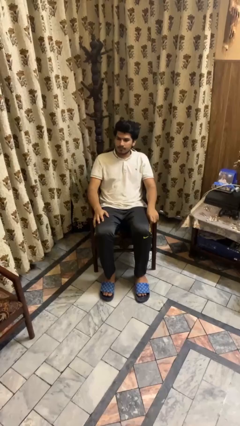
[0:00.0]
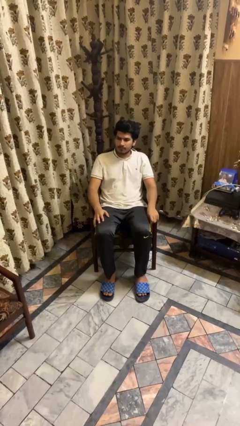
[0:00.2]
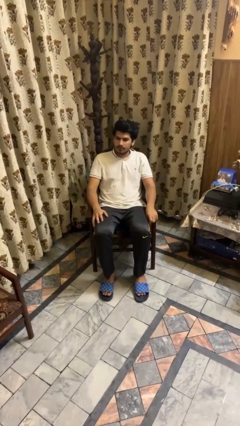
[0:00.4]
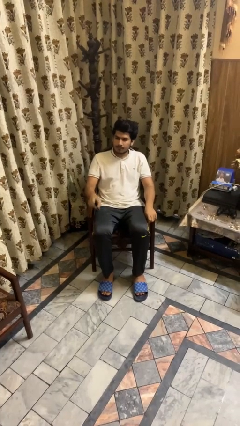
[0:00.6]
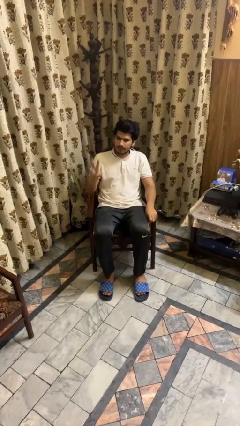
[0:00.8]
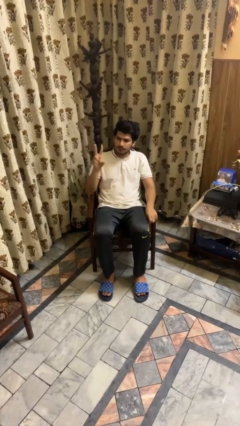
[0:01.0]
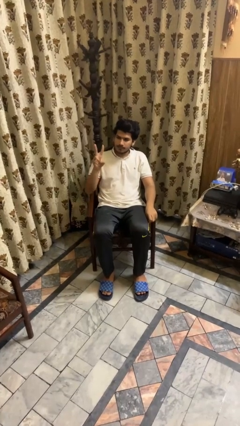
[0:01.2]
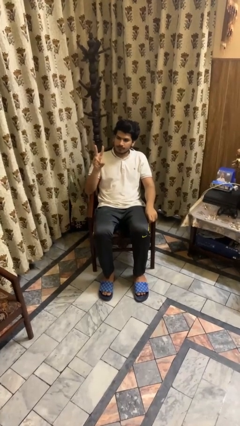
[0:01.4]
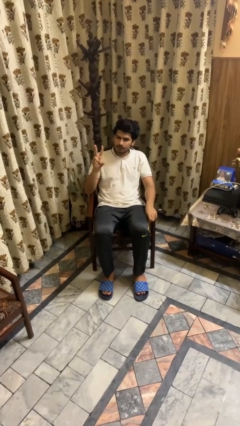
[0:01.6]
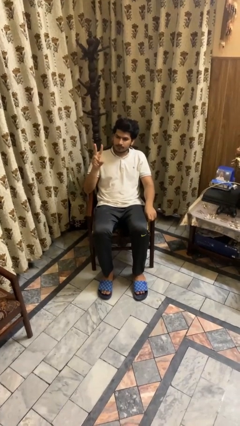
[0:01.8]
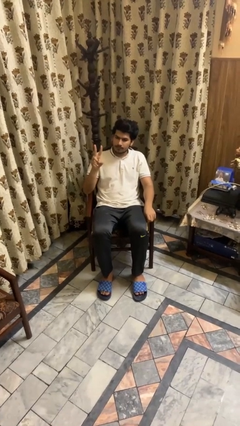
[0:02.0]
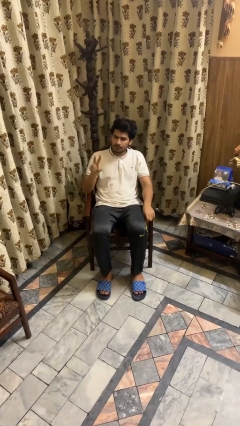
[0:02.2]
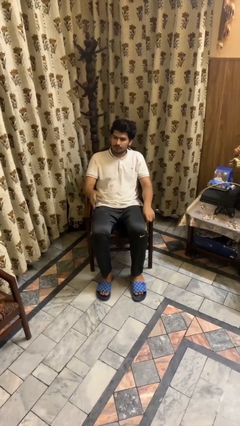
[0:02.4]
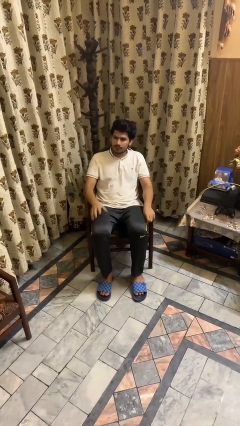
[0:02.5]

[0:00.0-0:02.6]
person gestures peace

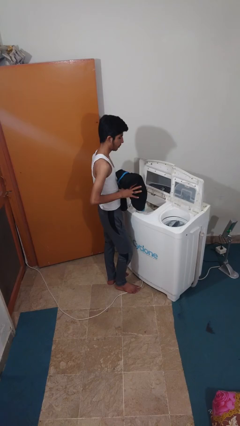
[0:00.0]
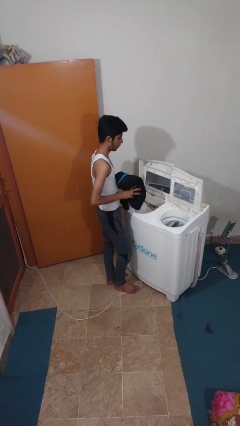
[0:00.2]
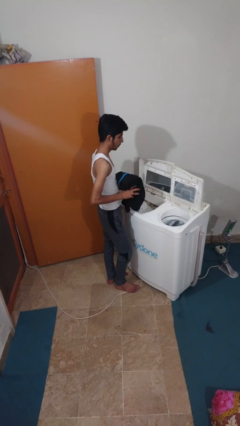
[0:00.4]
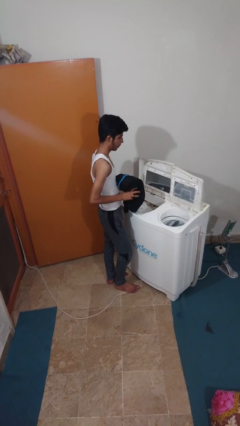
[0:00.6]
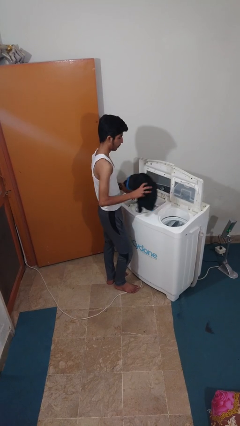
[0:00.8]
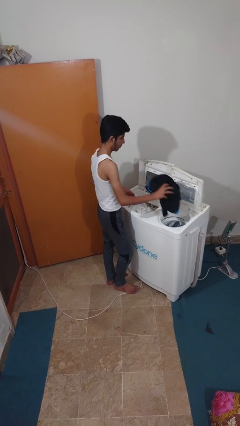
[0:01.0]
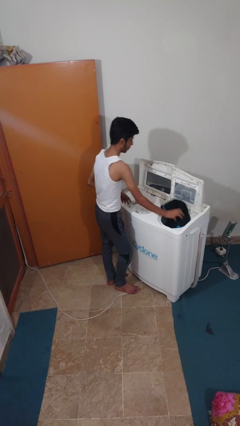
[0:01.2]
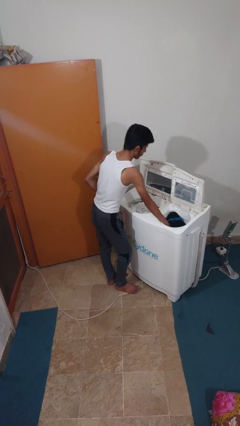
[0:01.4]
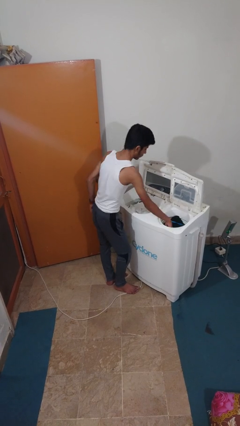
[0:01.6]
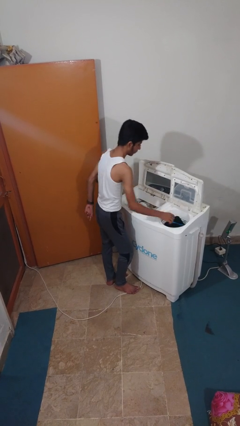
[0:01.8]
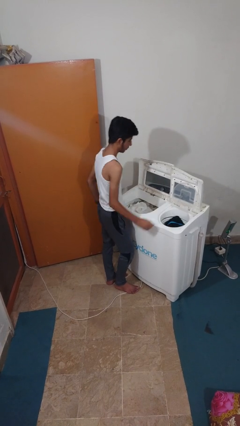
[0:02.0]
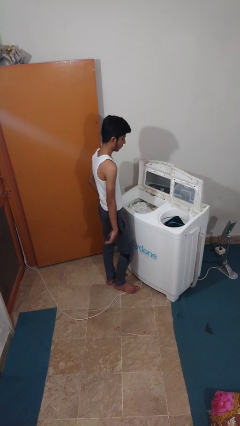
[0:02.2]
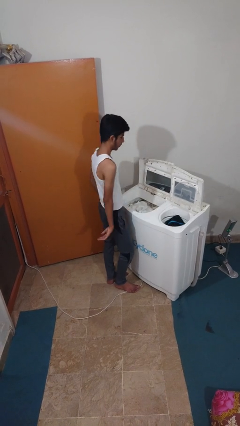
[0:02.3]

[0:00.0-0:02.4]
person loads dryer

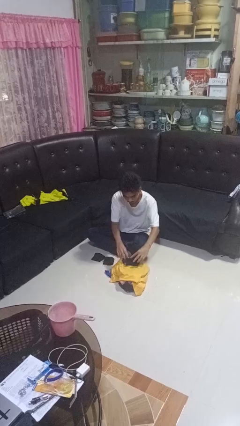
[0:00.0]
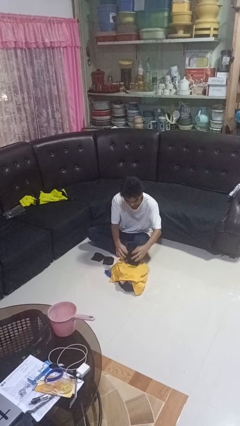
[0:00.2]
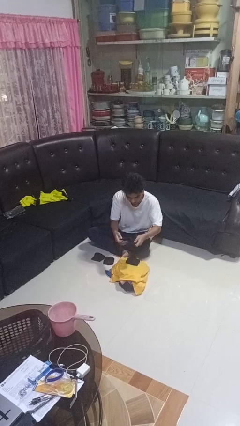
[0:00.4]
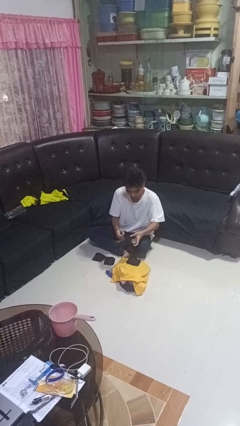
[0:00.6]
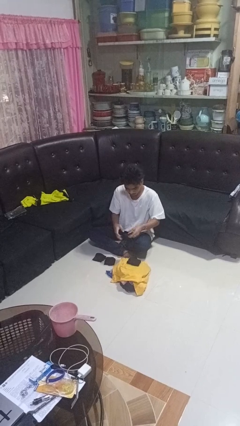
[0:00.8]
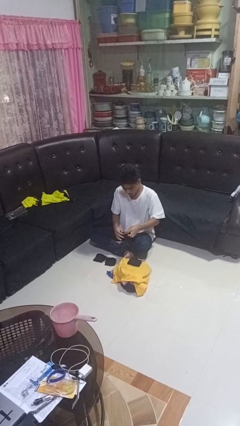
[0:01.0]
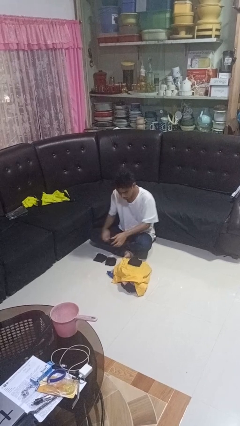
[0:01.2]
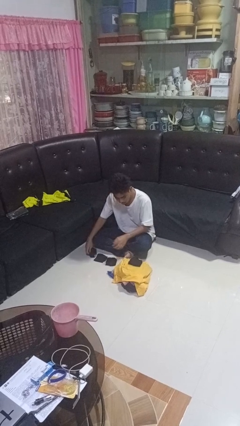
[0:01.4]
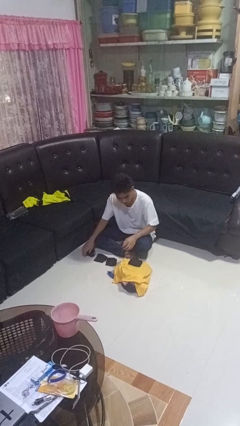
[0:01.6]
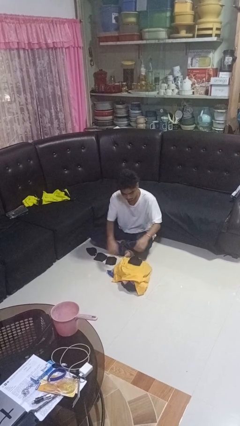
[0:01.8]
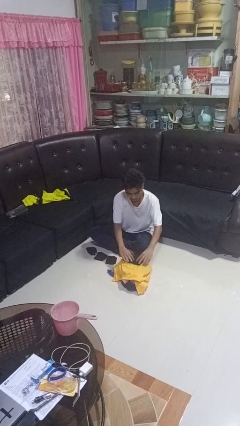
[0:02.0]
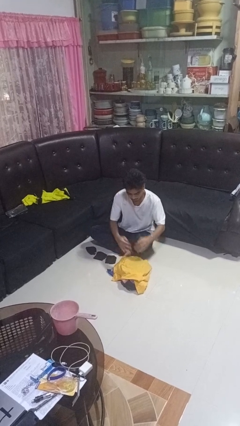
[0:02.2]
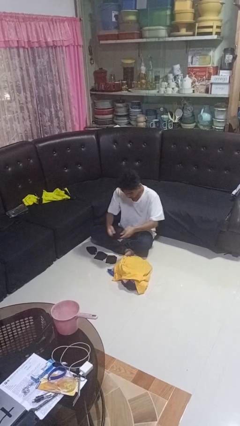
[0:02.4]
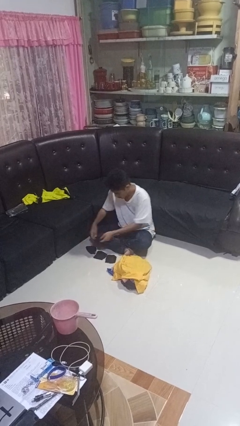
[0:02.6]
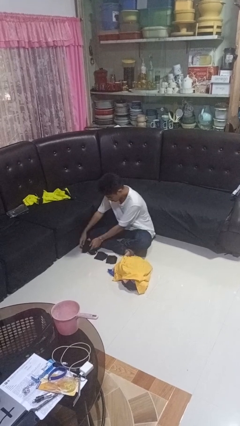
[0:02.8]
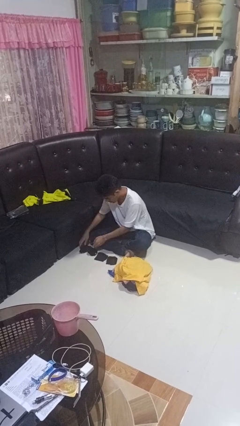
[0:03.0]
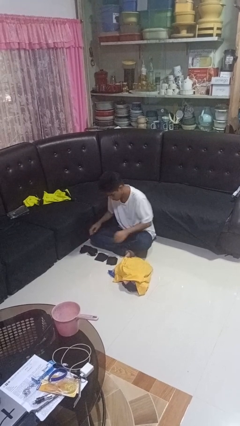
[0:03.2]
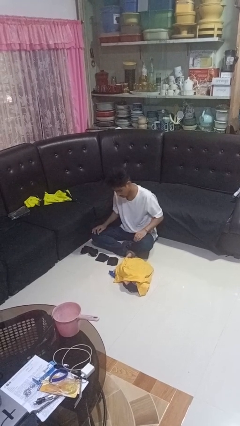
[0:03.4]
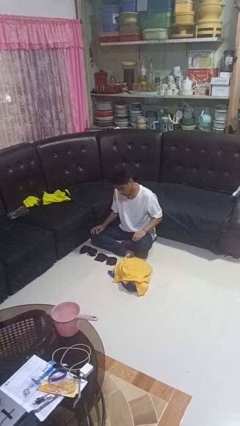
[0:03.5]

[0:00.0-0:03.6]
person folds socks

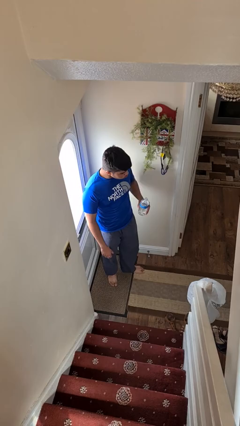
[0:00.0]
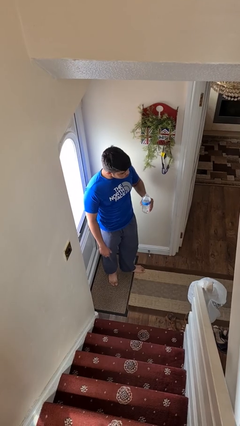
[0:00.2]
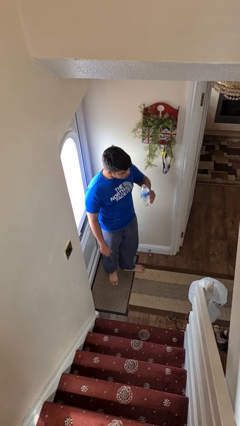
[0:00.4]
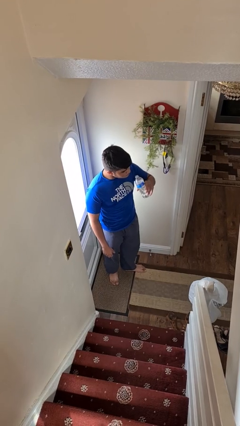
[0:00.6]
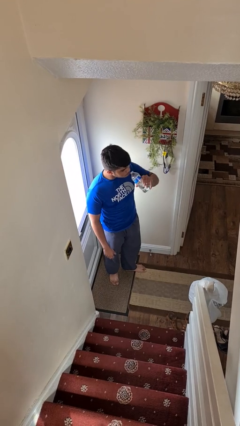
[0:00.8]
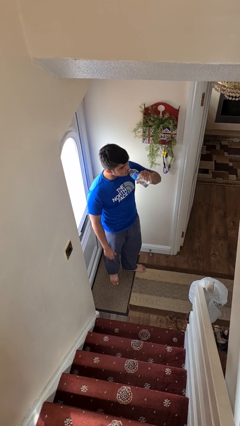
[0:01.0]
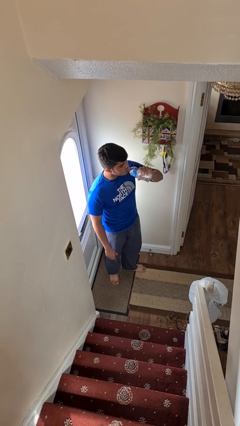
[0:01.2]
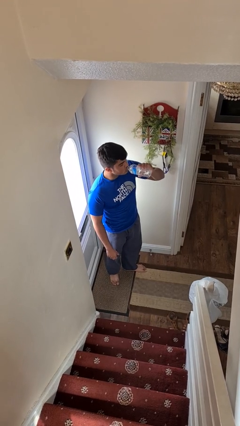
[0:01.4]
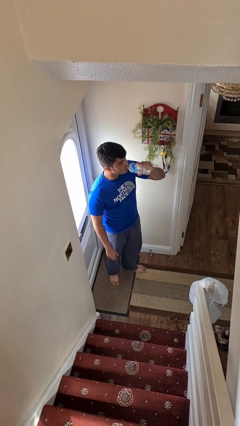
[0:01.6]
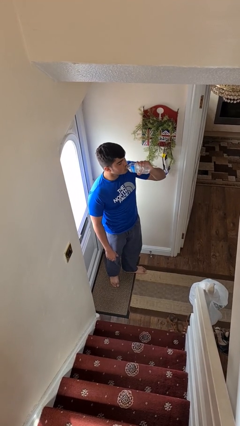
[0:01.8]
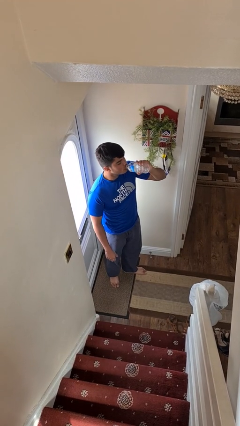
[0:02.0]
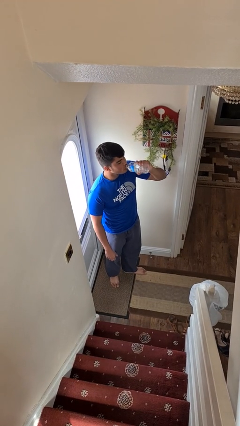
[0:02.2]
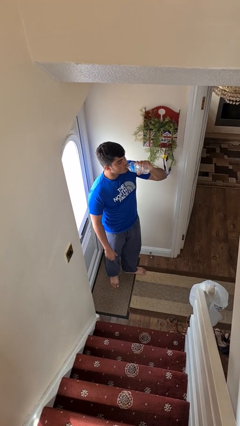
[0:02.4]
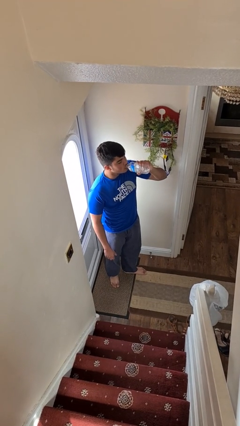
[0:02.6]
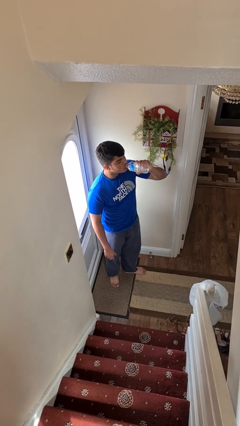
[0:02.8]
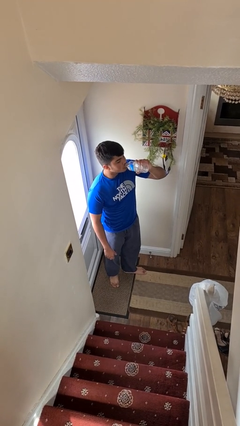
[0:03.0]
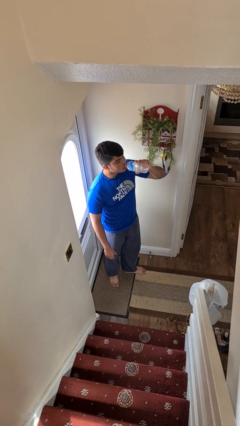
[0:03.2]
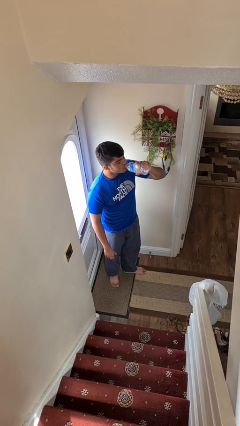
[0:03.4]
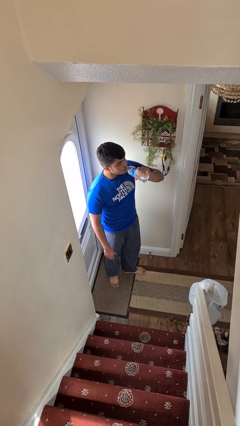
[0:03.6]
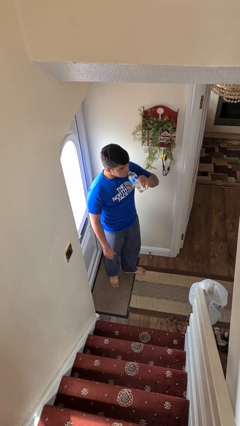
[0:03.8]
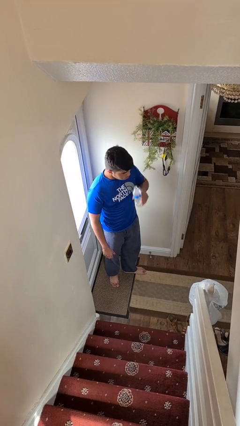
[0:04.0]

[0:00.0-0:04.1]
person drinks from bottle

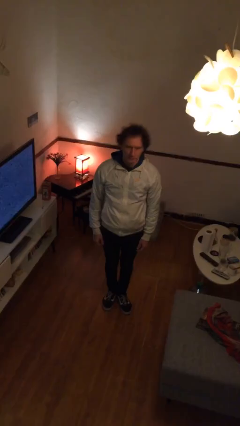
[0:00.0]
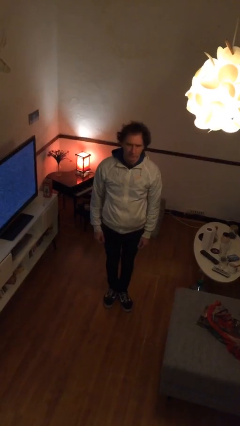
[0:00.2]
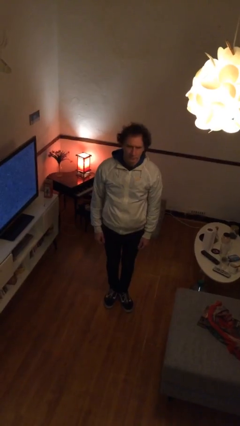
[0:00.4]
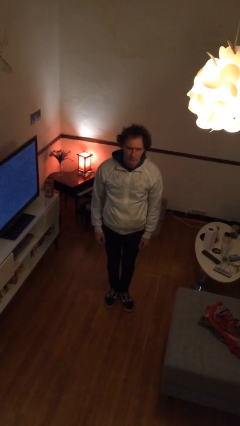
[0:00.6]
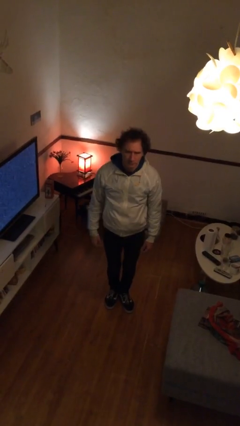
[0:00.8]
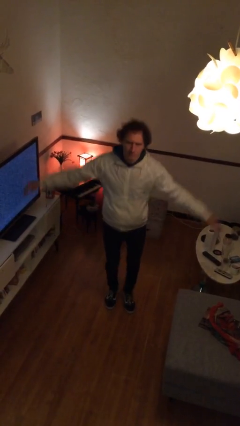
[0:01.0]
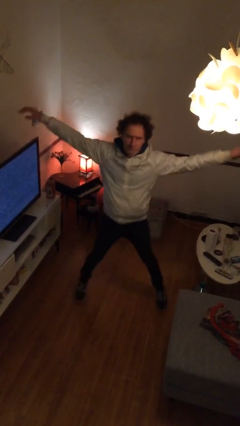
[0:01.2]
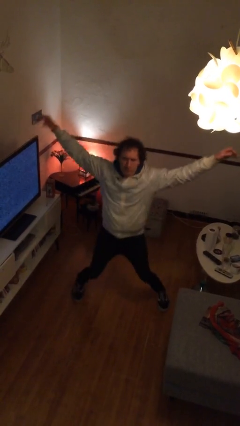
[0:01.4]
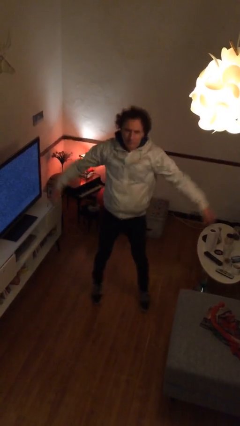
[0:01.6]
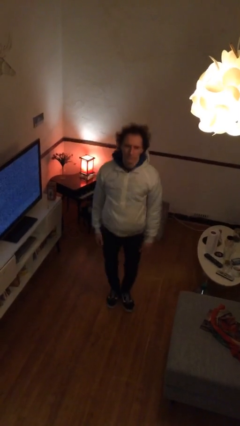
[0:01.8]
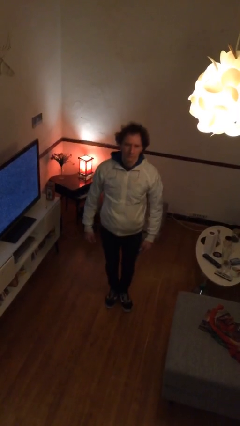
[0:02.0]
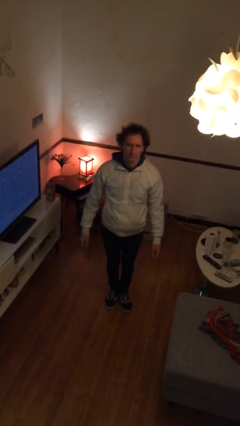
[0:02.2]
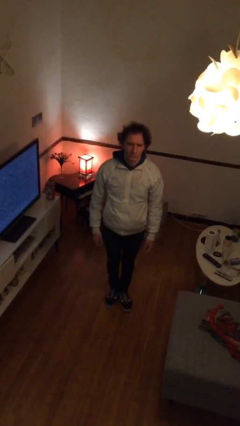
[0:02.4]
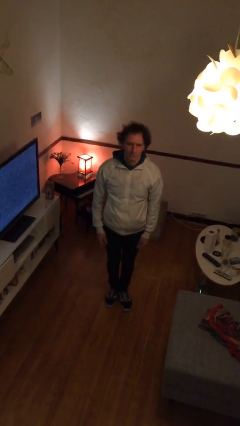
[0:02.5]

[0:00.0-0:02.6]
person exercises with jumping jacks

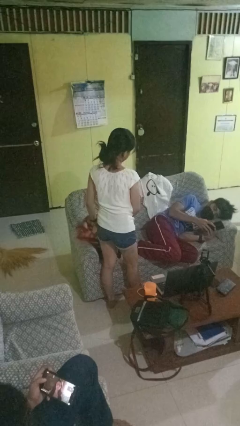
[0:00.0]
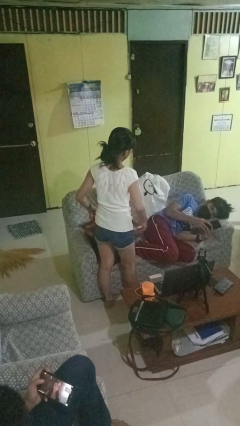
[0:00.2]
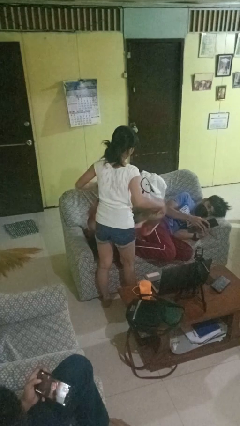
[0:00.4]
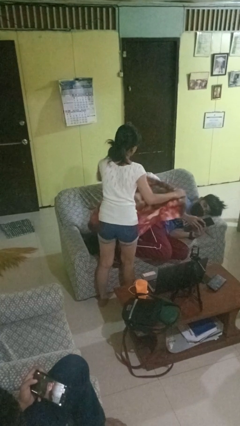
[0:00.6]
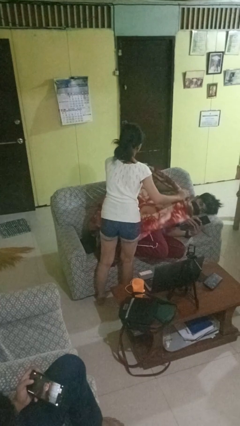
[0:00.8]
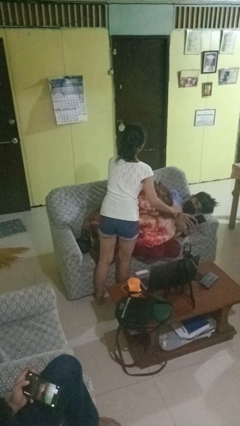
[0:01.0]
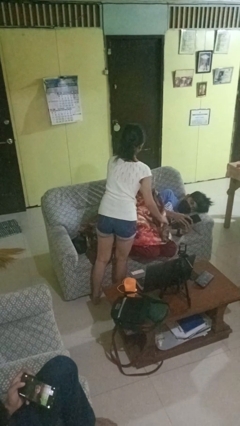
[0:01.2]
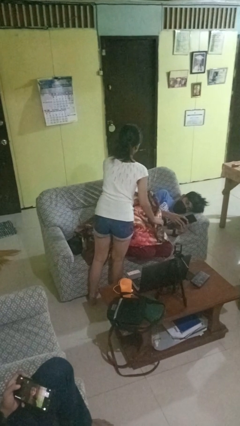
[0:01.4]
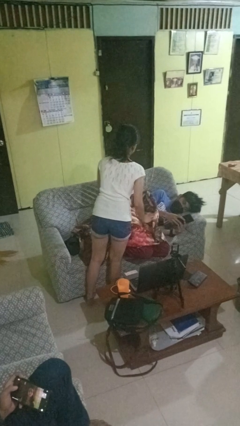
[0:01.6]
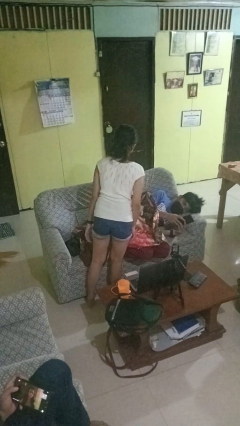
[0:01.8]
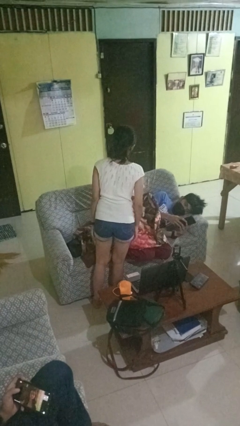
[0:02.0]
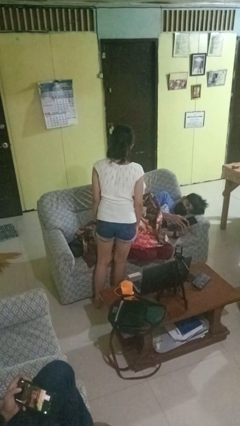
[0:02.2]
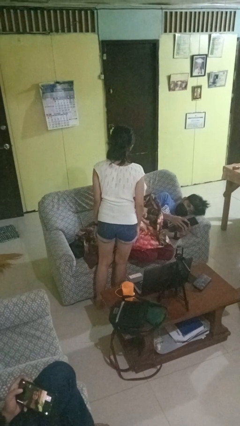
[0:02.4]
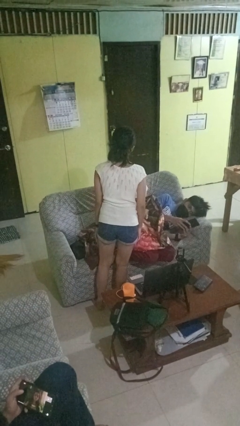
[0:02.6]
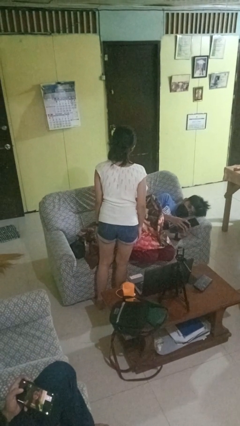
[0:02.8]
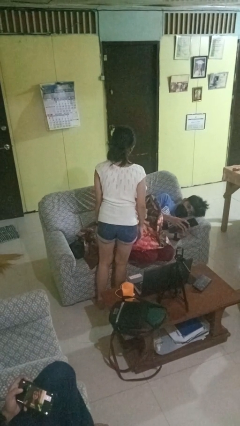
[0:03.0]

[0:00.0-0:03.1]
person covers friend with blanket
